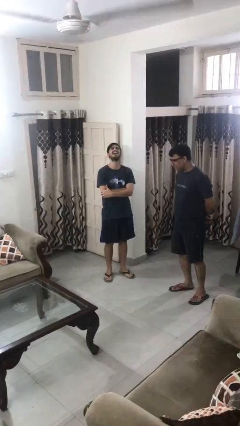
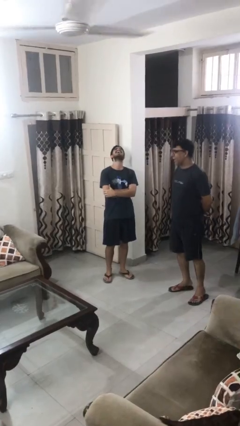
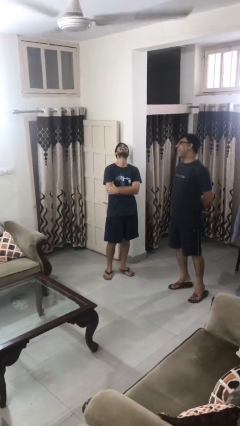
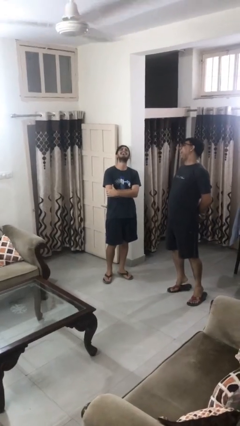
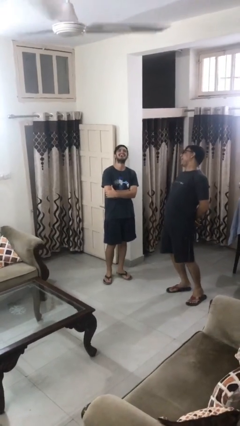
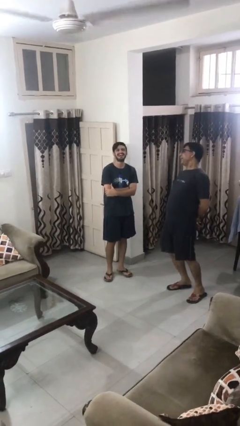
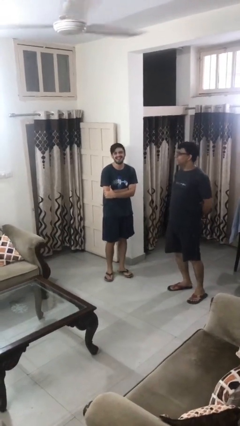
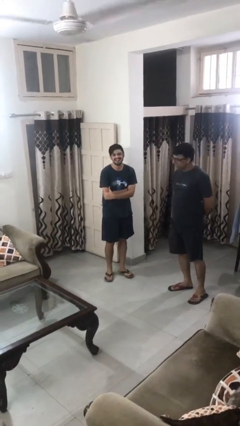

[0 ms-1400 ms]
person laughs with person

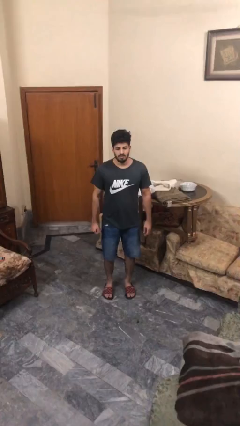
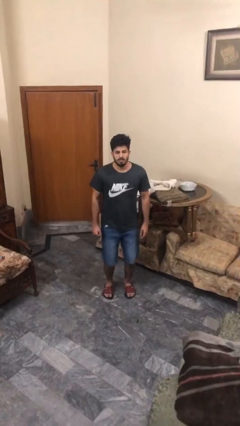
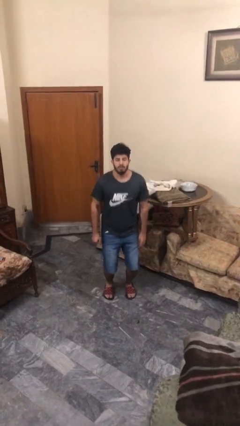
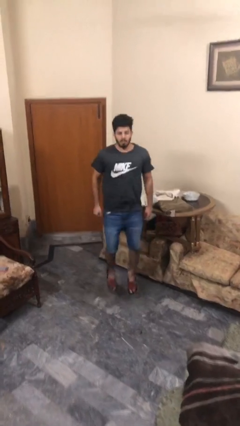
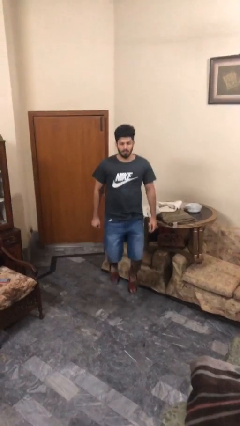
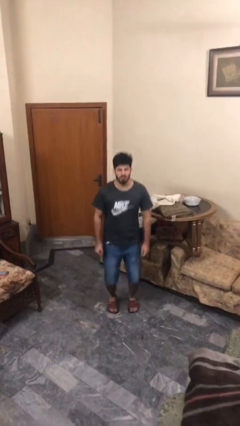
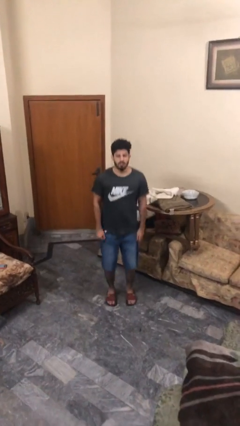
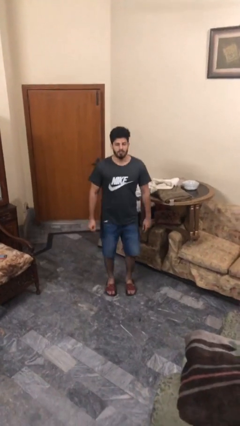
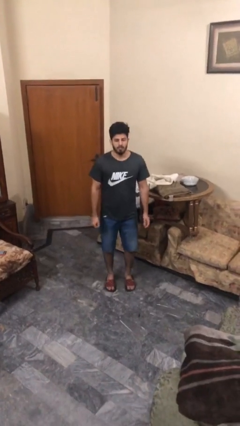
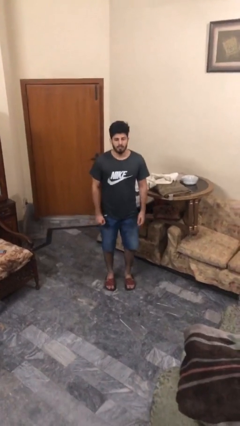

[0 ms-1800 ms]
person jumps

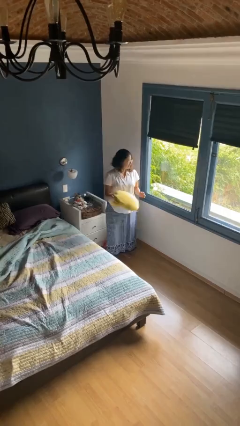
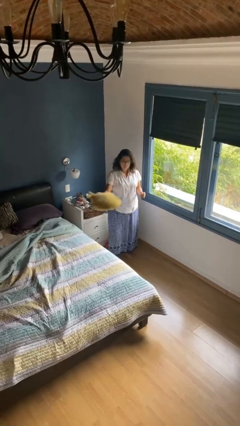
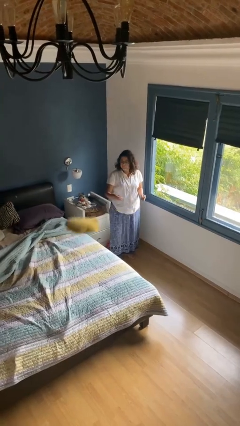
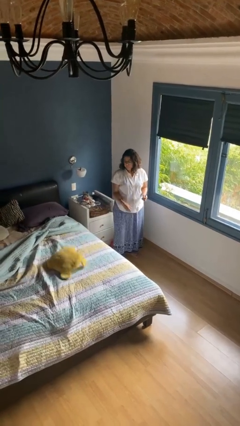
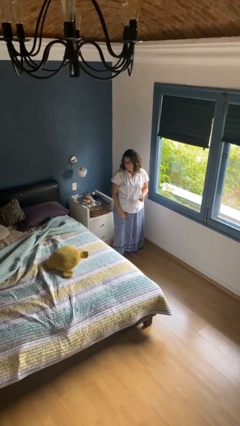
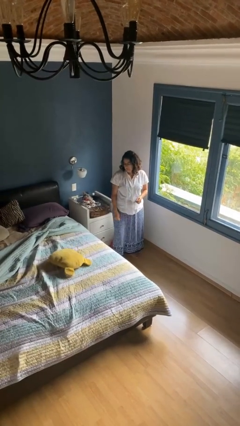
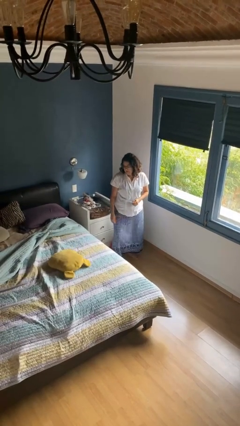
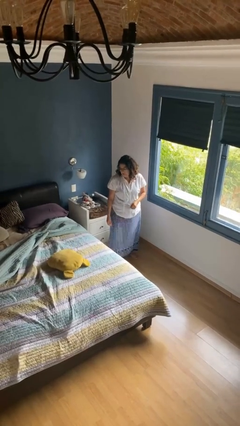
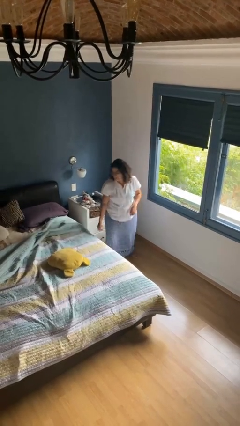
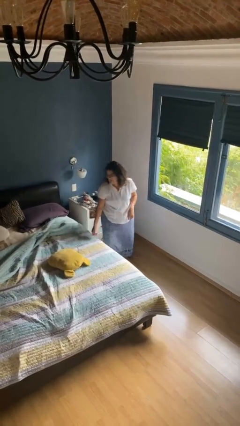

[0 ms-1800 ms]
person throws object on bed

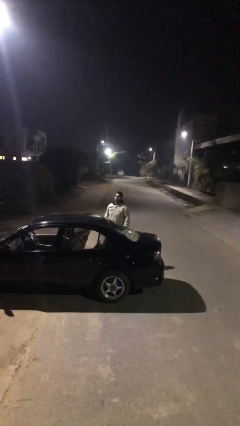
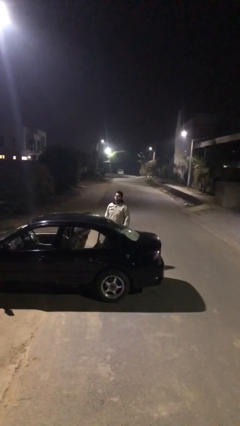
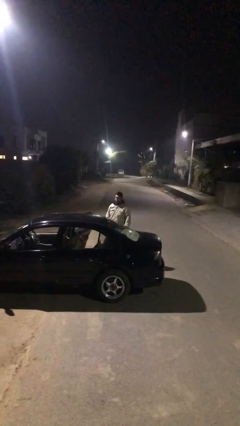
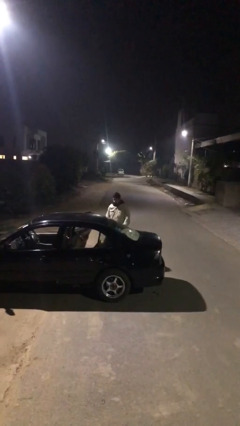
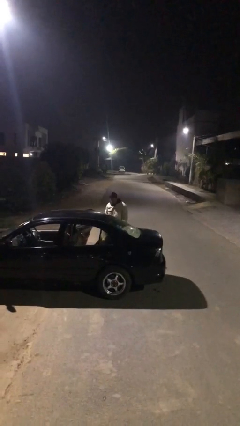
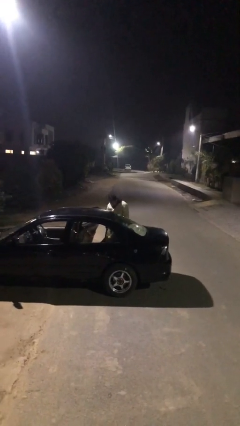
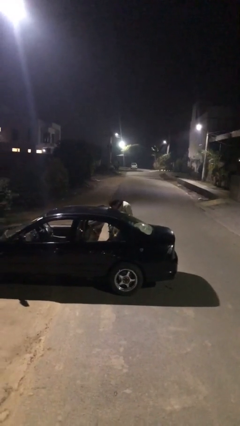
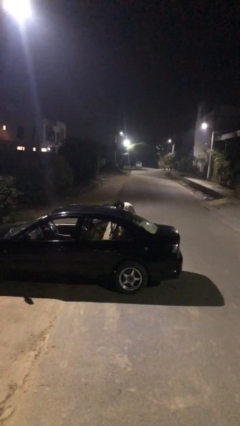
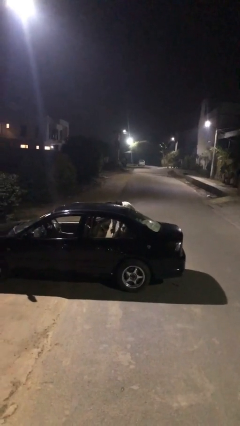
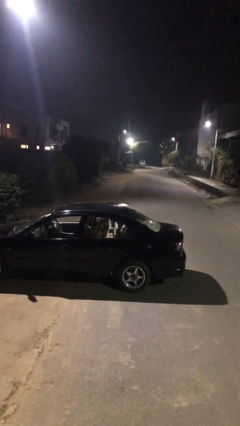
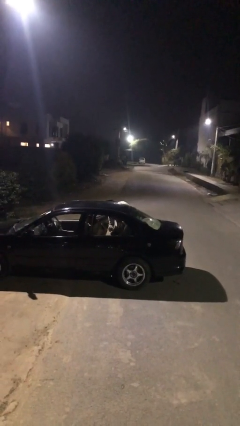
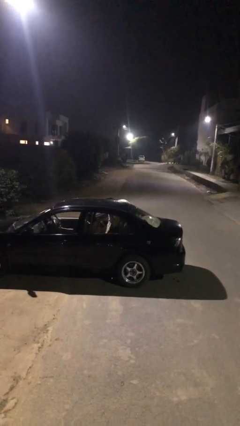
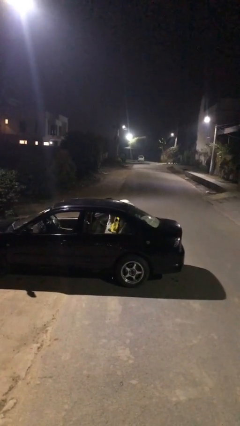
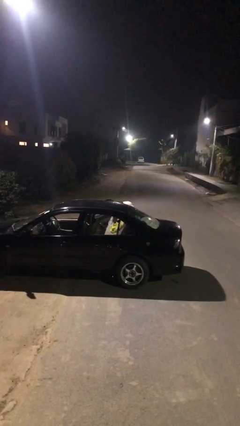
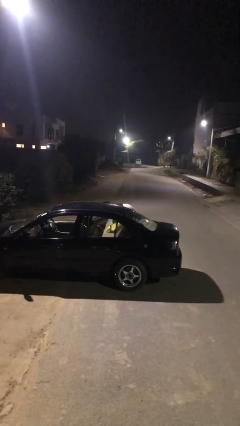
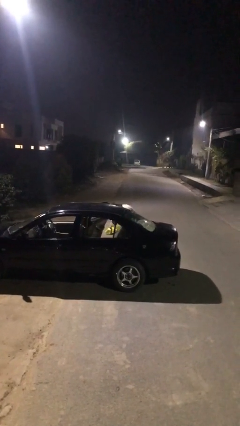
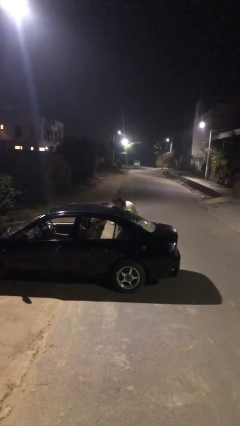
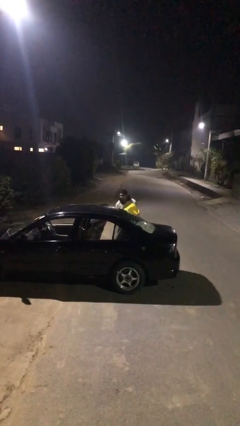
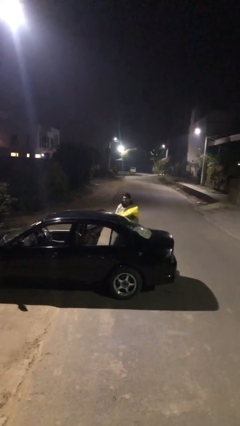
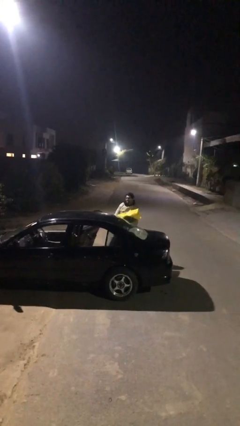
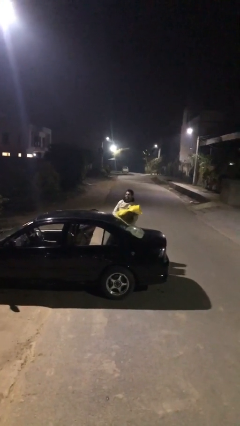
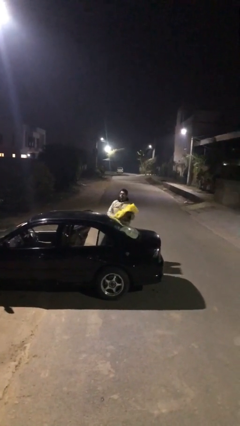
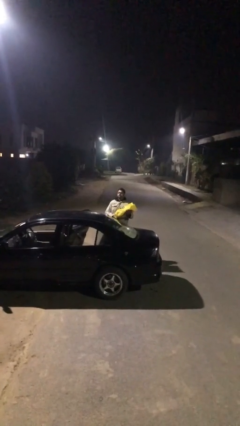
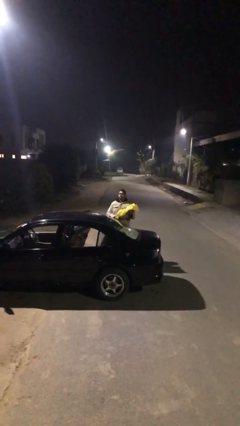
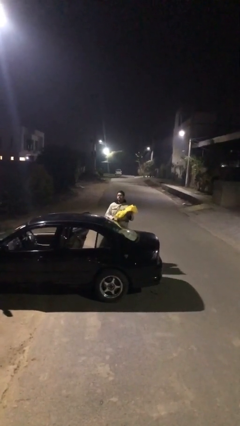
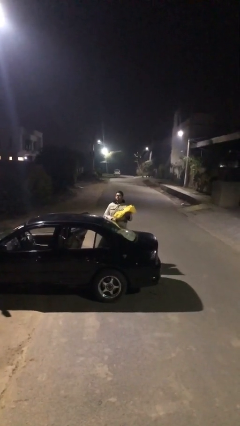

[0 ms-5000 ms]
person unloads car

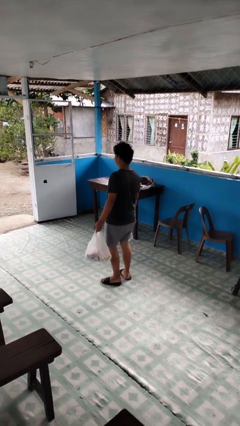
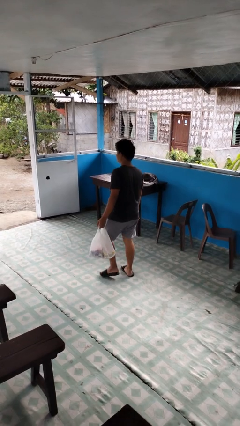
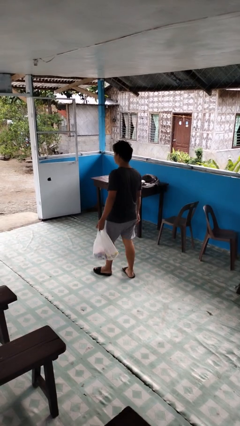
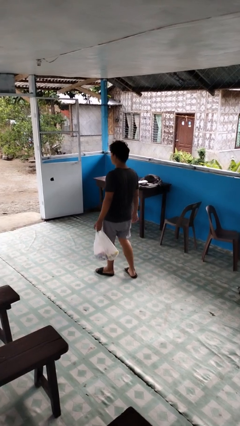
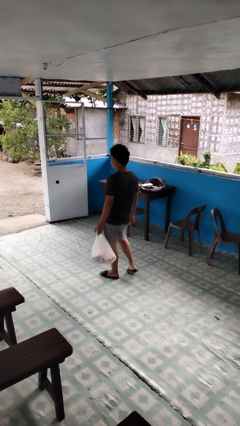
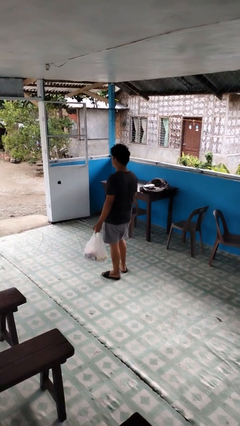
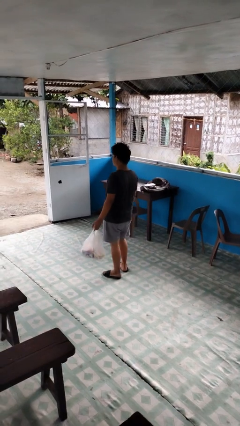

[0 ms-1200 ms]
person carries groceries

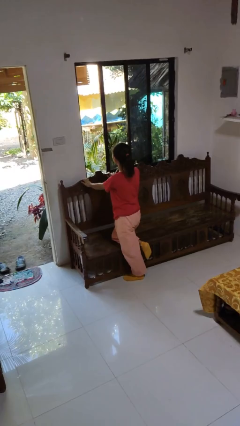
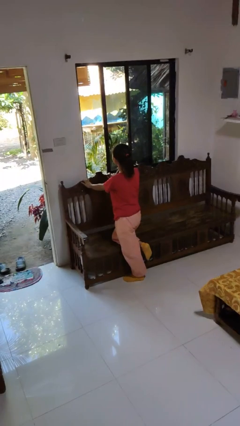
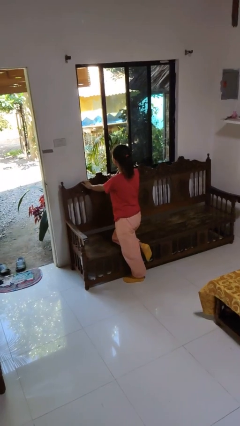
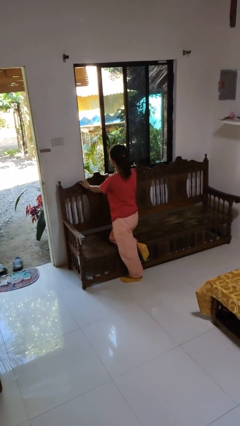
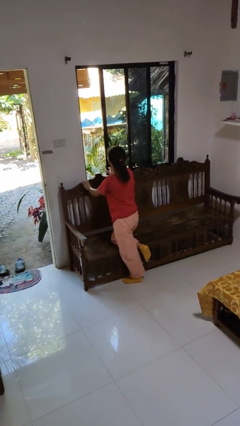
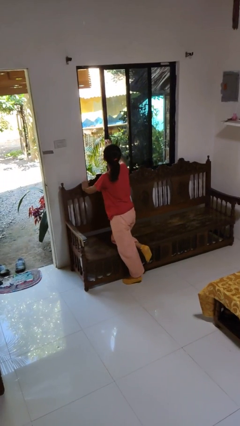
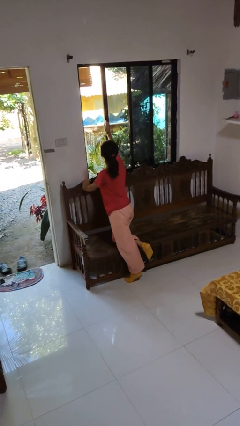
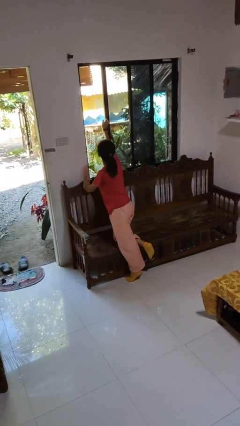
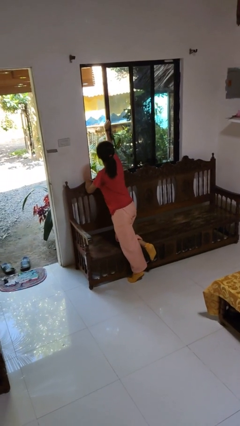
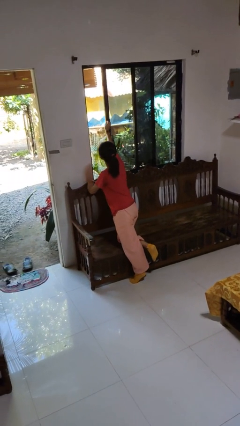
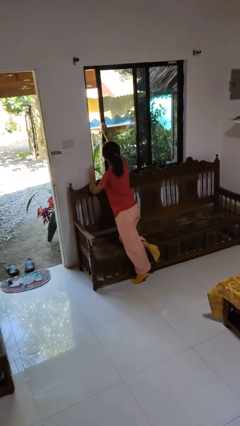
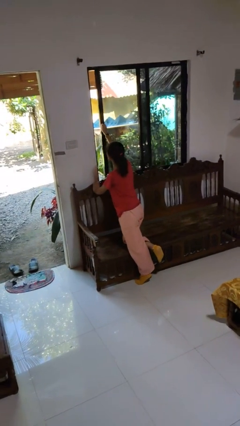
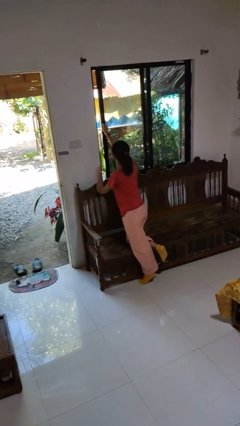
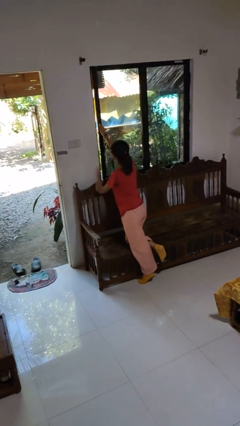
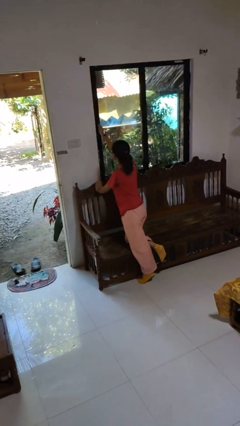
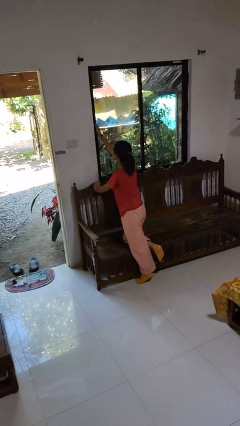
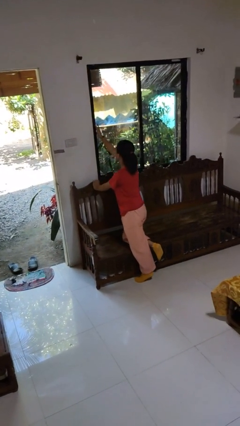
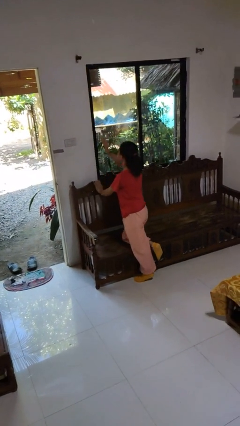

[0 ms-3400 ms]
person closes home window

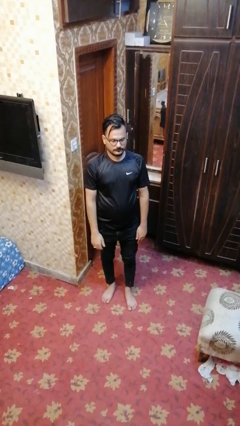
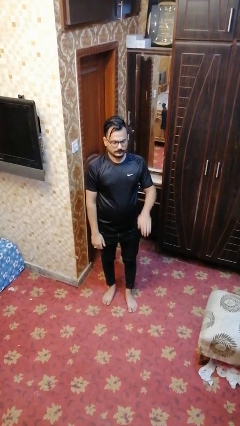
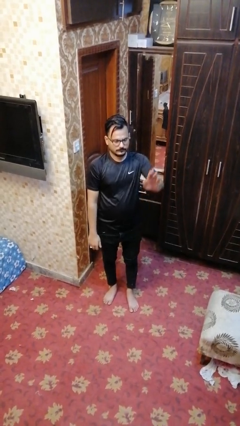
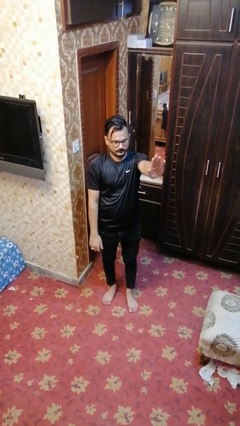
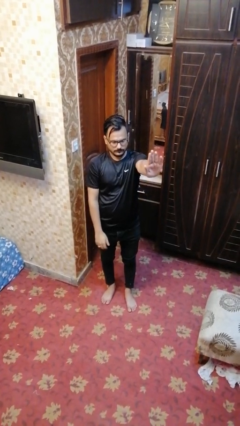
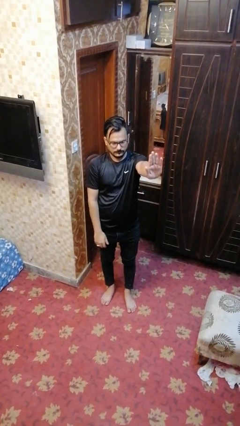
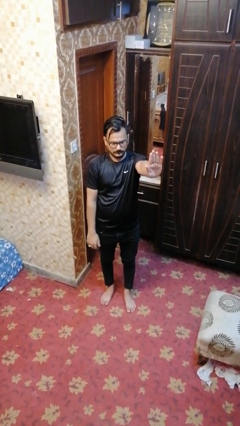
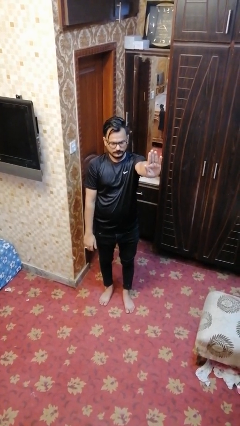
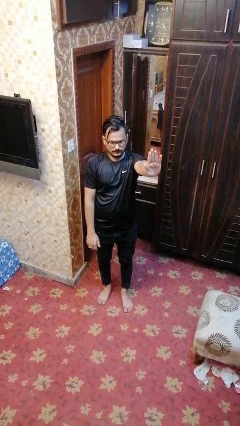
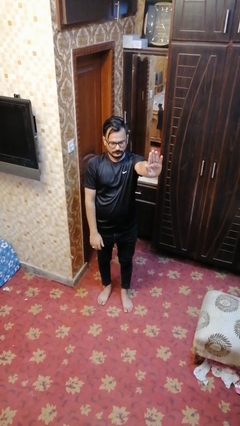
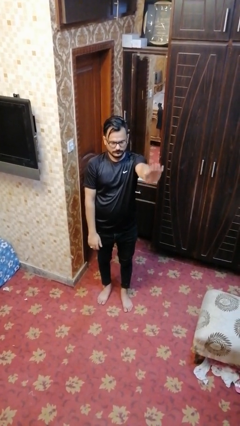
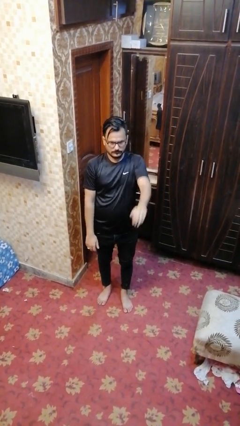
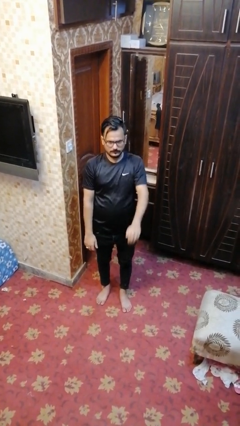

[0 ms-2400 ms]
person gestures stop
